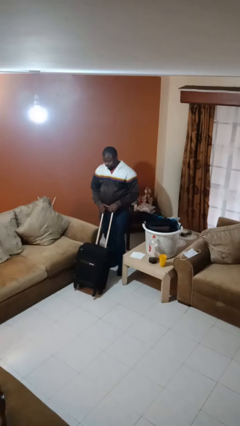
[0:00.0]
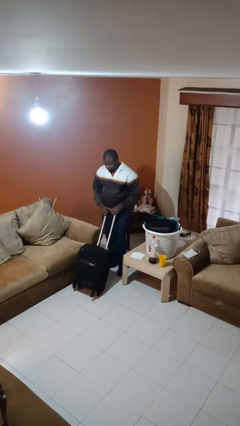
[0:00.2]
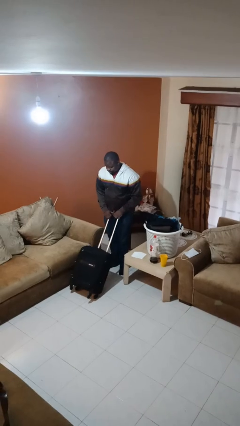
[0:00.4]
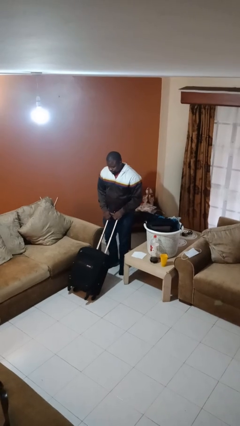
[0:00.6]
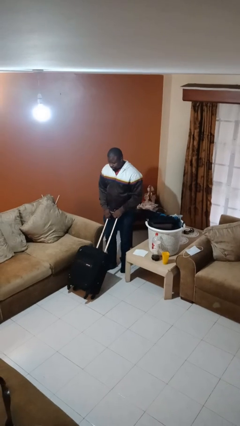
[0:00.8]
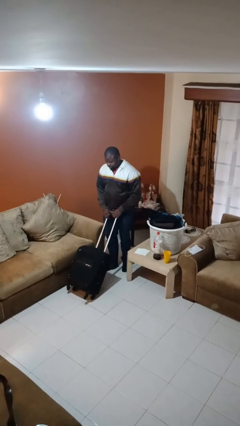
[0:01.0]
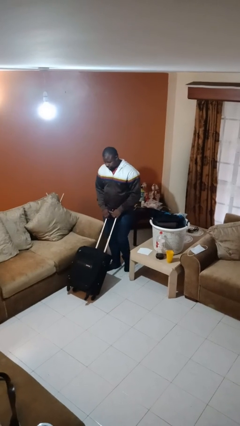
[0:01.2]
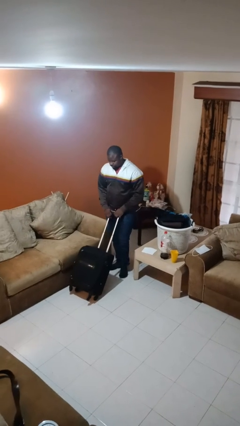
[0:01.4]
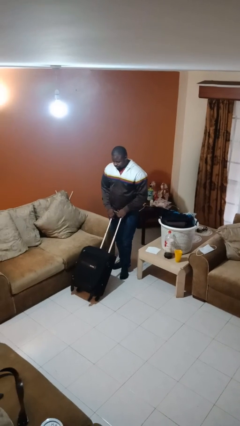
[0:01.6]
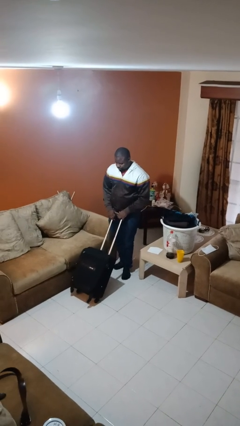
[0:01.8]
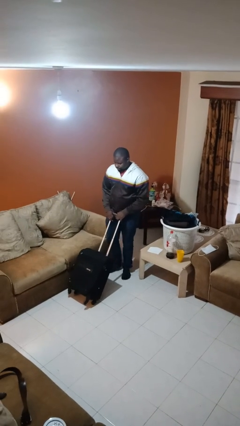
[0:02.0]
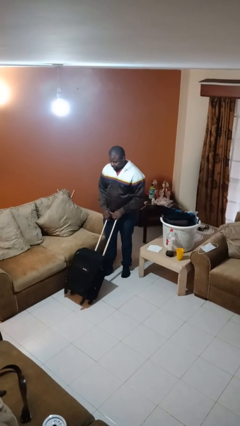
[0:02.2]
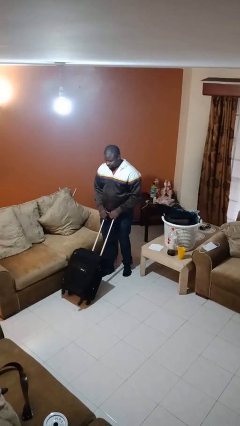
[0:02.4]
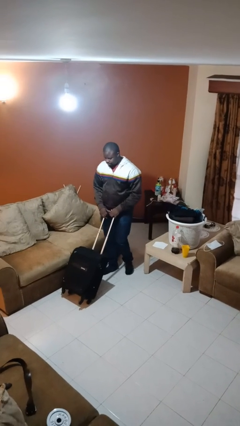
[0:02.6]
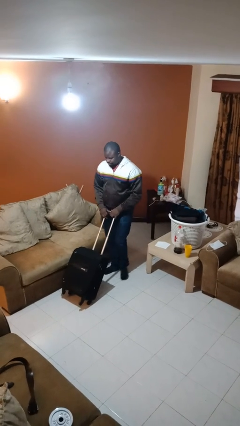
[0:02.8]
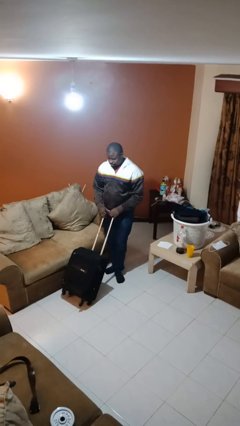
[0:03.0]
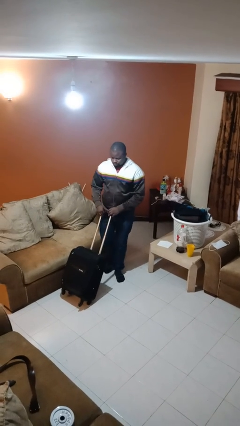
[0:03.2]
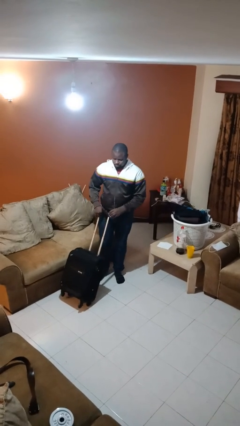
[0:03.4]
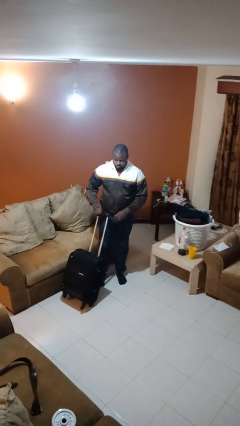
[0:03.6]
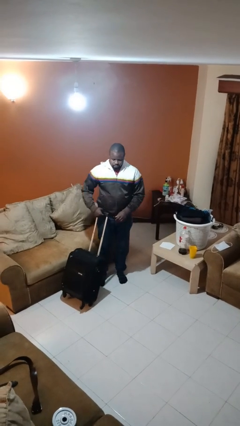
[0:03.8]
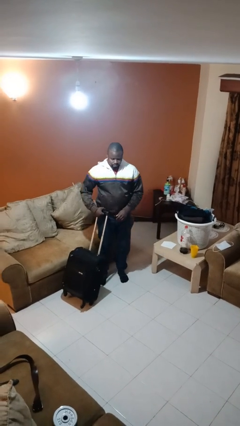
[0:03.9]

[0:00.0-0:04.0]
person pushes wheeled cart

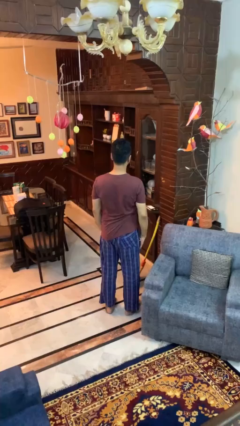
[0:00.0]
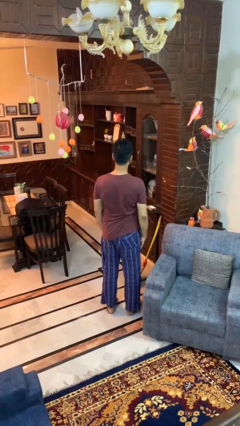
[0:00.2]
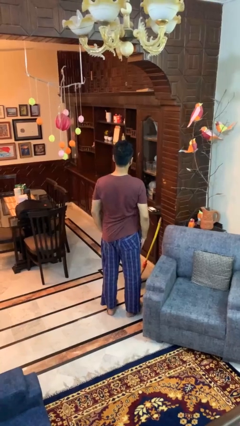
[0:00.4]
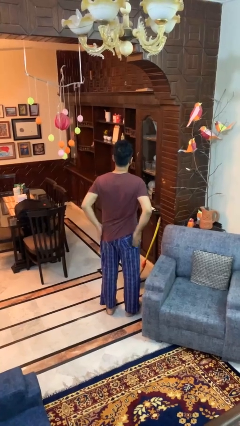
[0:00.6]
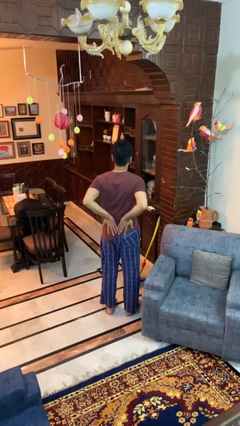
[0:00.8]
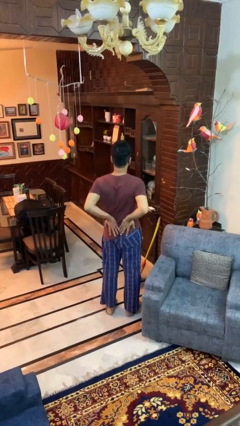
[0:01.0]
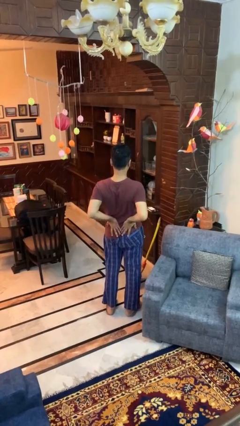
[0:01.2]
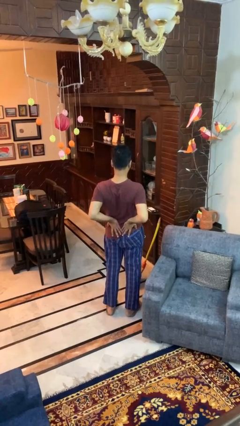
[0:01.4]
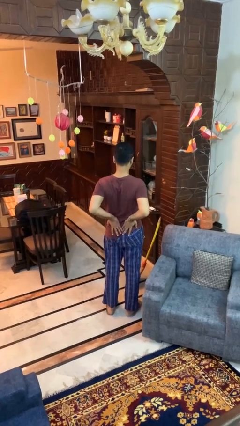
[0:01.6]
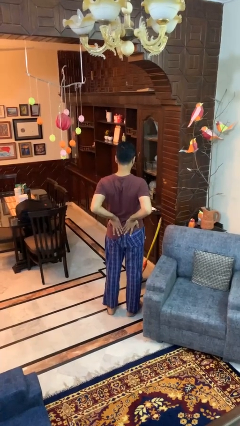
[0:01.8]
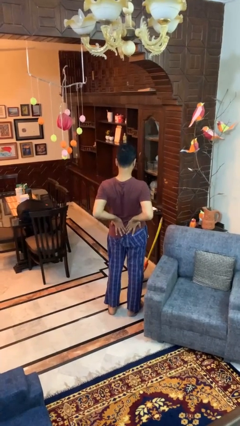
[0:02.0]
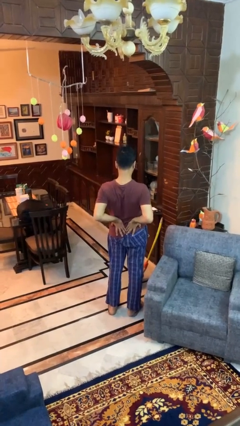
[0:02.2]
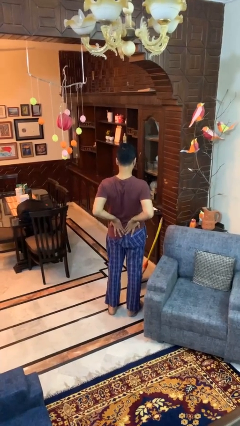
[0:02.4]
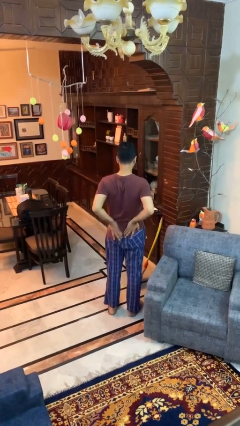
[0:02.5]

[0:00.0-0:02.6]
person stretches back

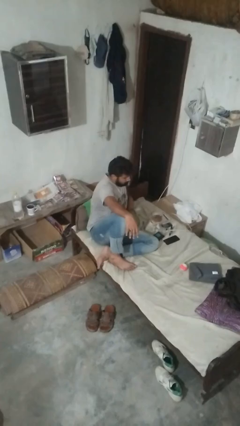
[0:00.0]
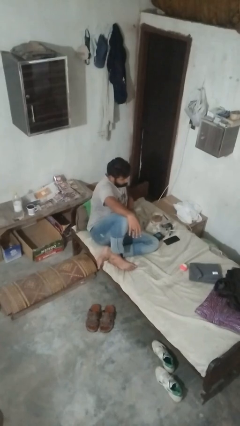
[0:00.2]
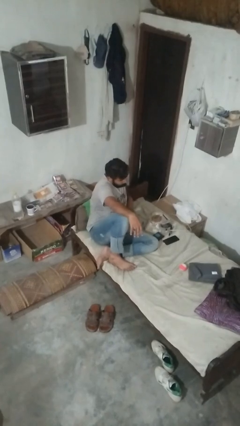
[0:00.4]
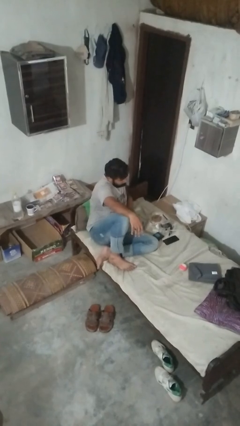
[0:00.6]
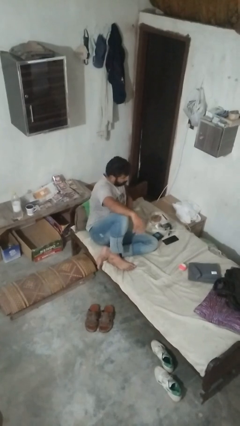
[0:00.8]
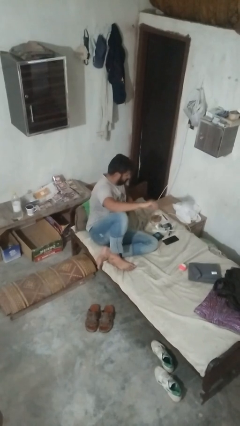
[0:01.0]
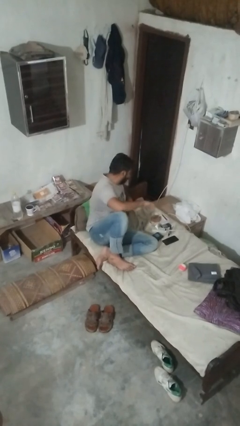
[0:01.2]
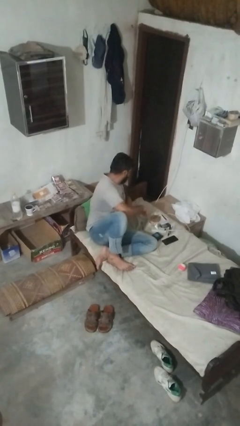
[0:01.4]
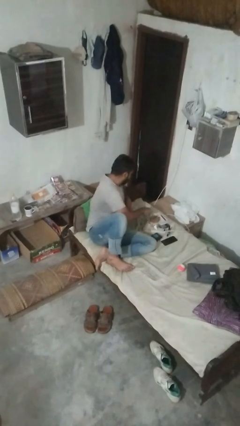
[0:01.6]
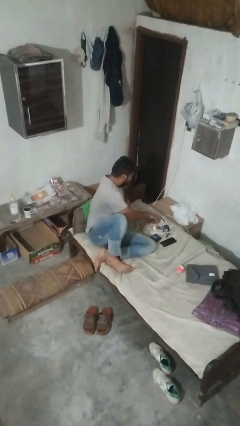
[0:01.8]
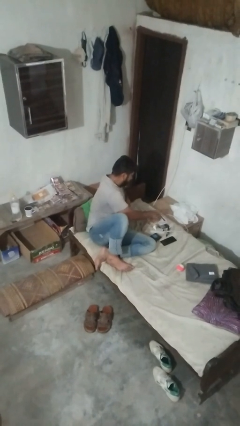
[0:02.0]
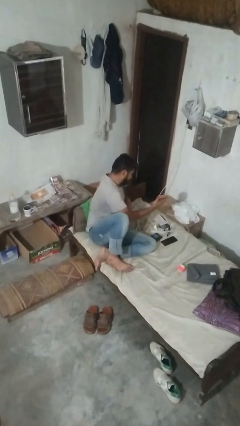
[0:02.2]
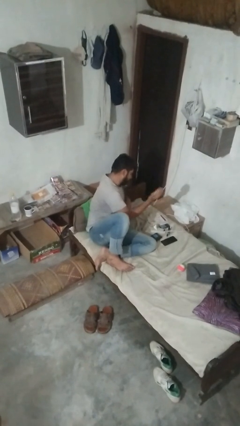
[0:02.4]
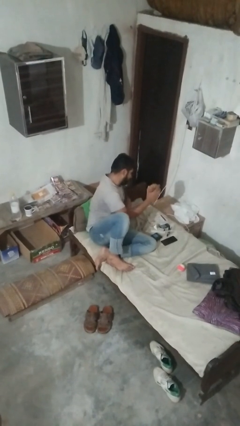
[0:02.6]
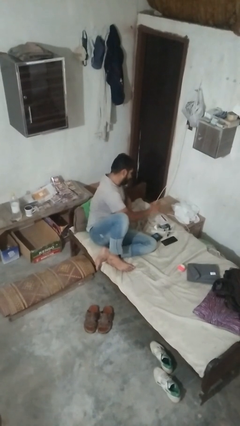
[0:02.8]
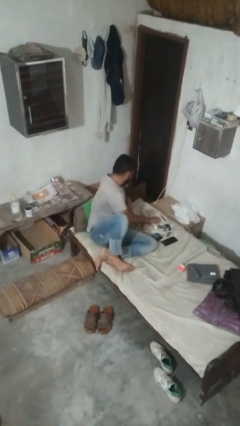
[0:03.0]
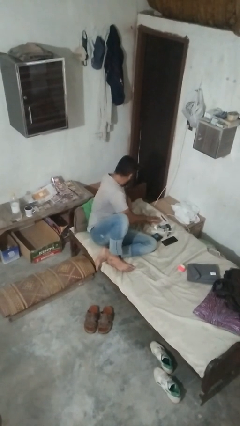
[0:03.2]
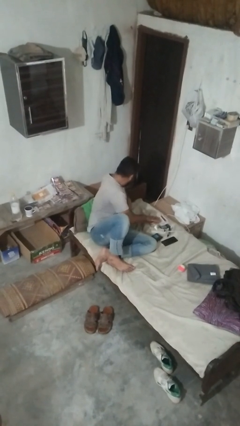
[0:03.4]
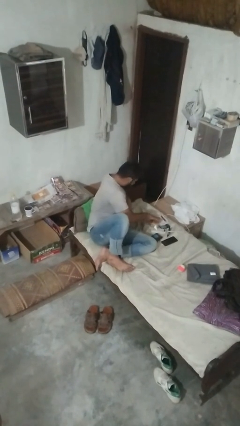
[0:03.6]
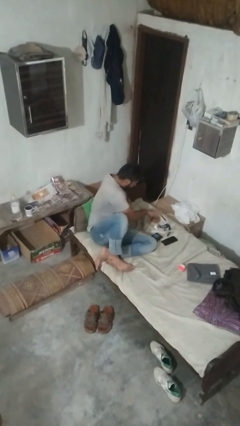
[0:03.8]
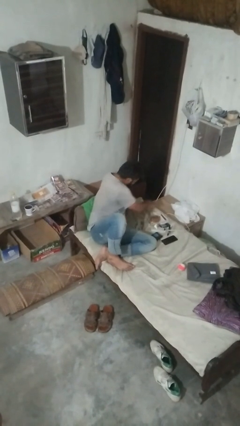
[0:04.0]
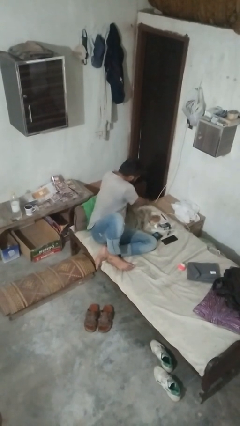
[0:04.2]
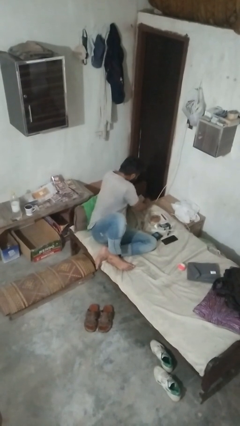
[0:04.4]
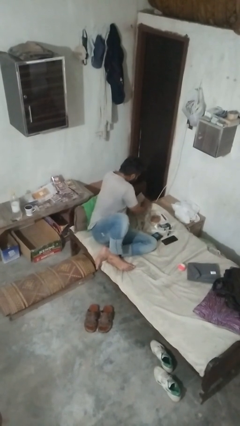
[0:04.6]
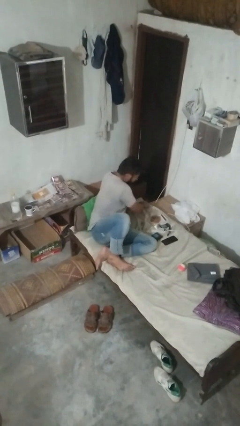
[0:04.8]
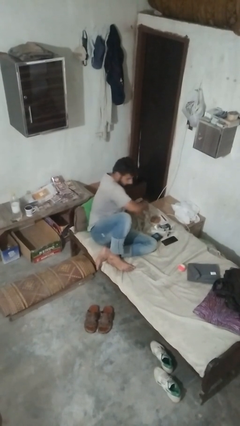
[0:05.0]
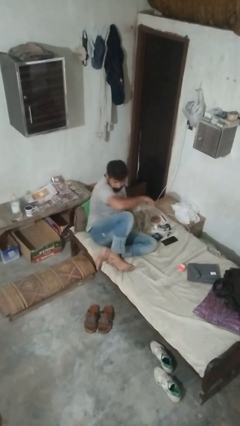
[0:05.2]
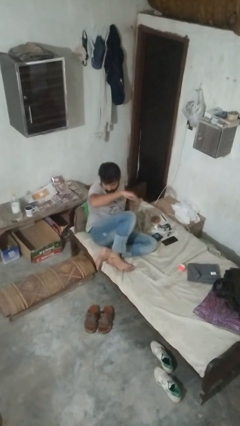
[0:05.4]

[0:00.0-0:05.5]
person searches under bed

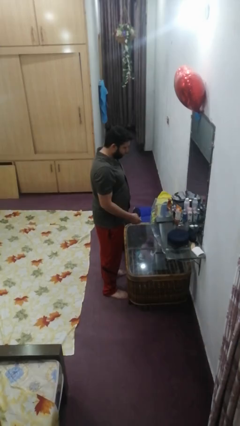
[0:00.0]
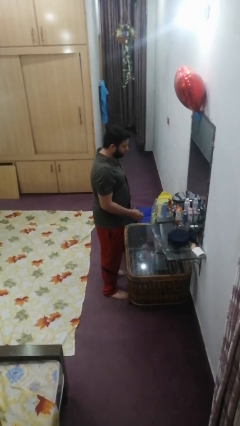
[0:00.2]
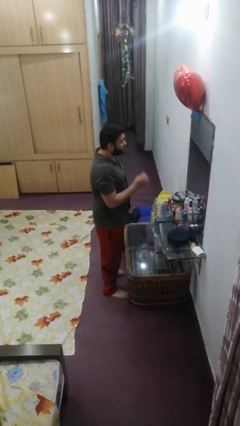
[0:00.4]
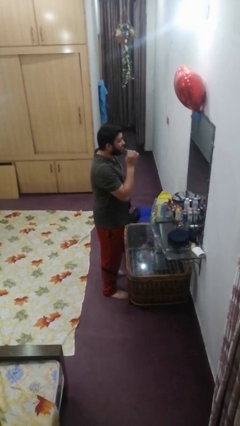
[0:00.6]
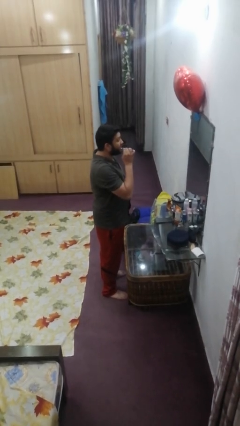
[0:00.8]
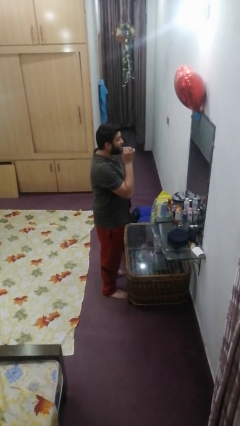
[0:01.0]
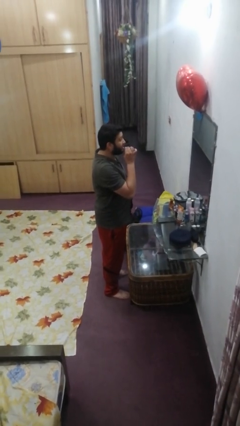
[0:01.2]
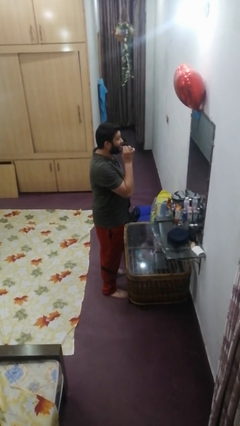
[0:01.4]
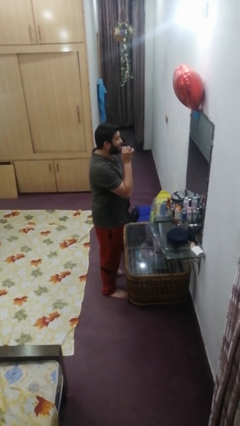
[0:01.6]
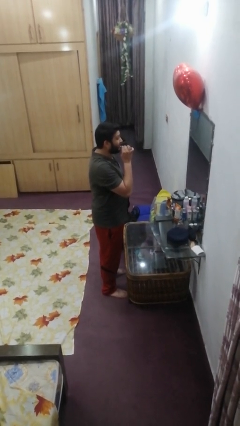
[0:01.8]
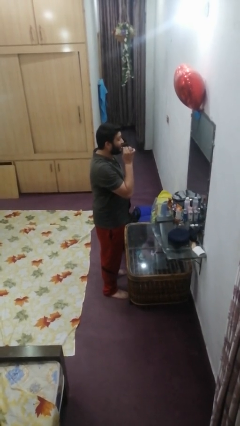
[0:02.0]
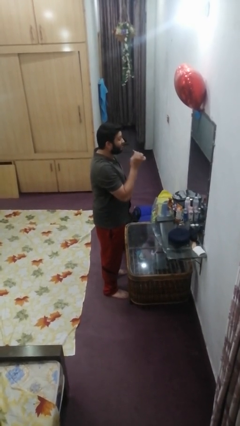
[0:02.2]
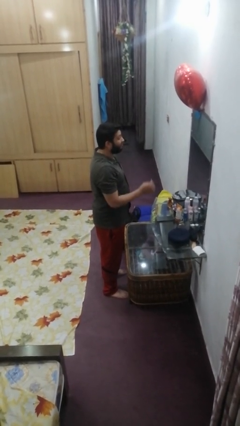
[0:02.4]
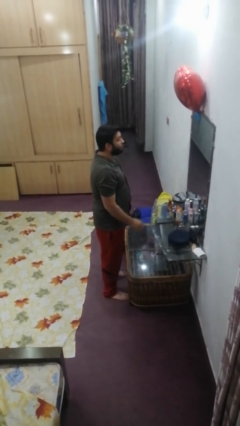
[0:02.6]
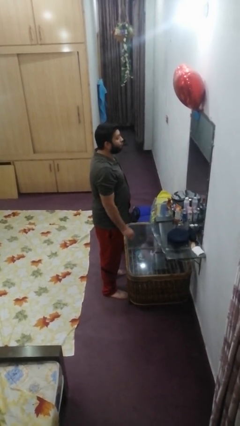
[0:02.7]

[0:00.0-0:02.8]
person flosses

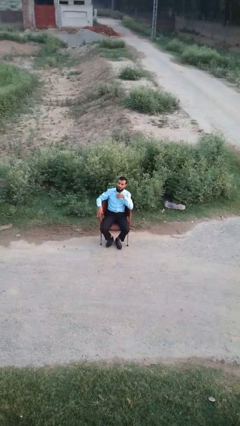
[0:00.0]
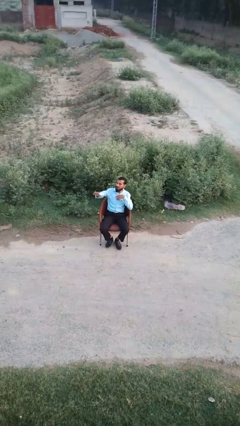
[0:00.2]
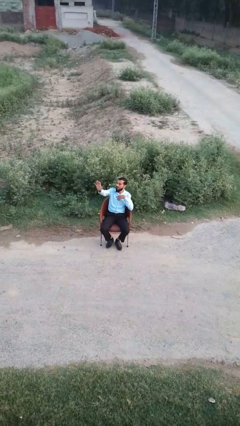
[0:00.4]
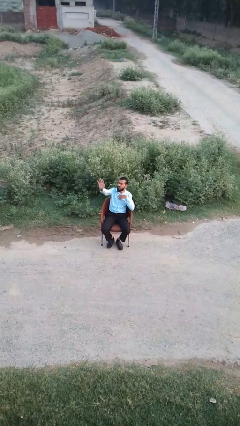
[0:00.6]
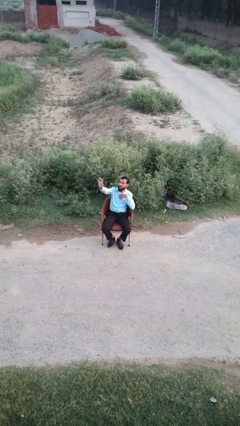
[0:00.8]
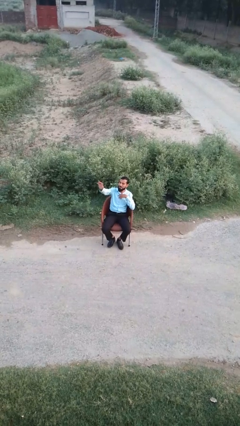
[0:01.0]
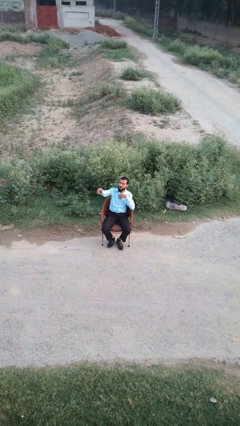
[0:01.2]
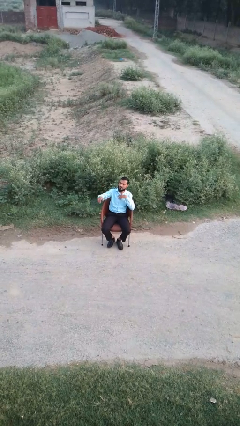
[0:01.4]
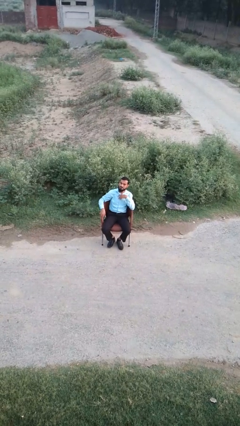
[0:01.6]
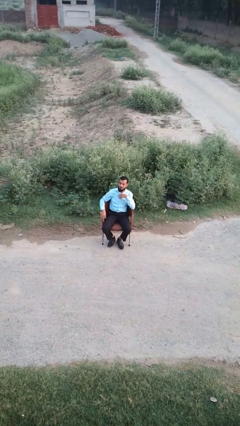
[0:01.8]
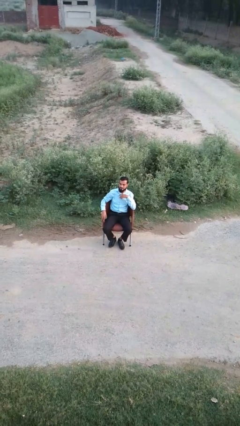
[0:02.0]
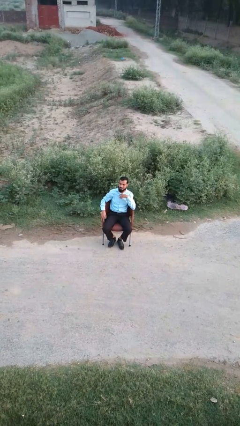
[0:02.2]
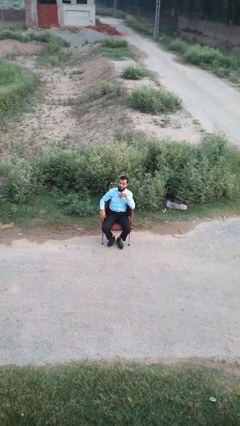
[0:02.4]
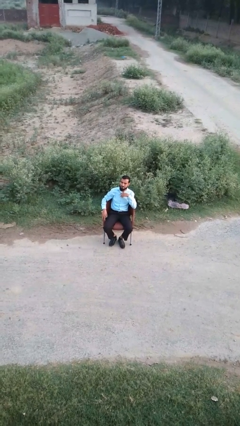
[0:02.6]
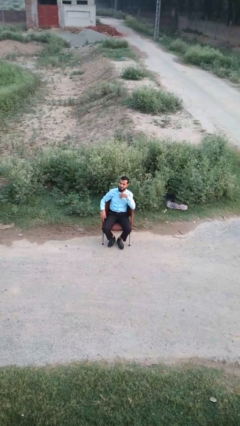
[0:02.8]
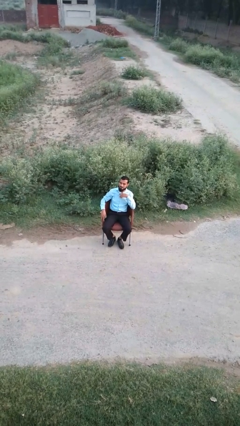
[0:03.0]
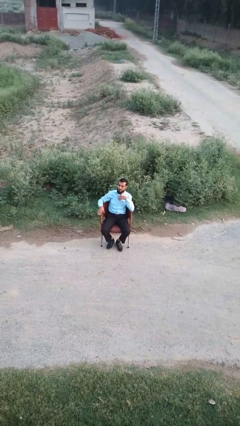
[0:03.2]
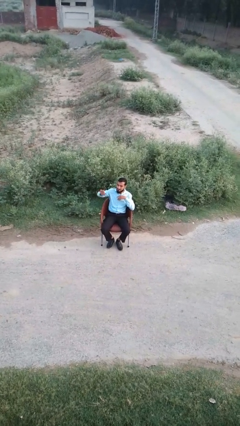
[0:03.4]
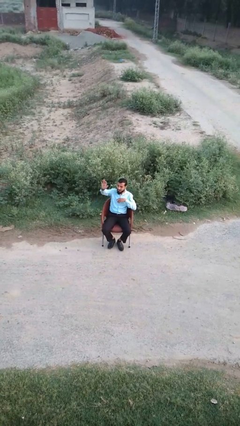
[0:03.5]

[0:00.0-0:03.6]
person gestures raise hand
